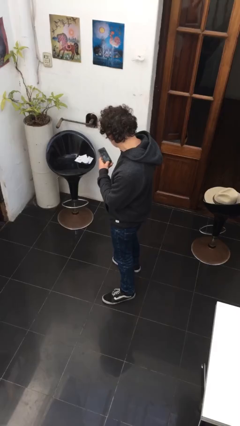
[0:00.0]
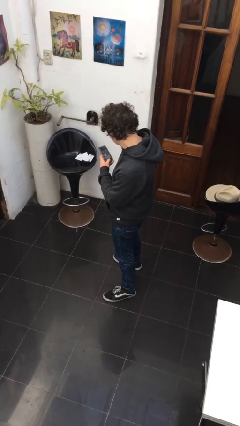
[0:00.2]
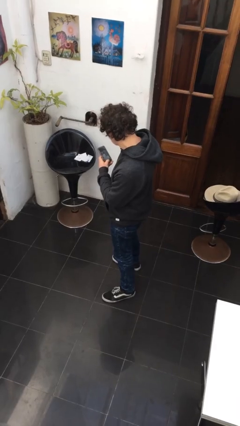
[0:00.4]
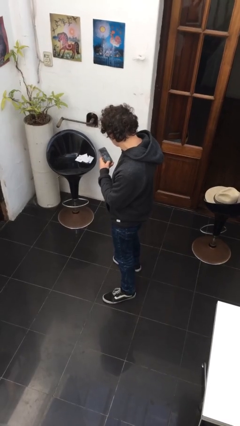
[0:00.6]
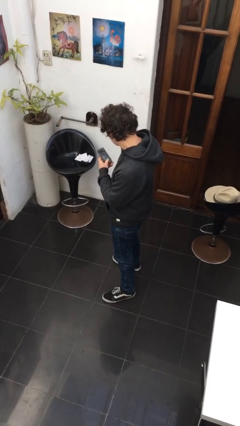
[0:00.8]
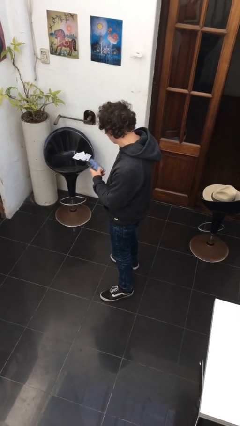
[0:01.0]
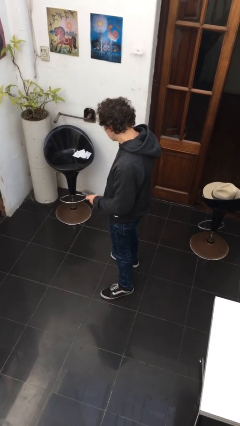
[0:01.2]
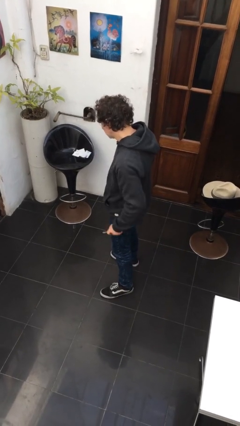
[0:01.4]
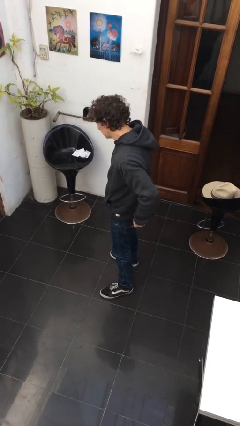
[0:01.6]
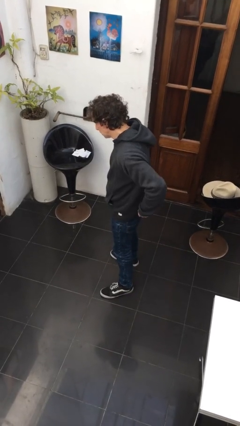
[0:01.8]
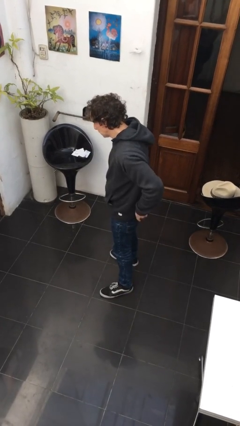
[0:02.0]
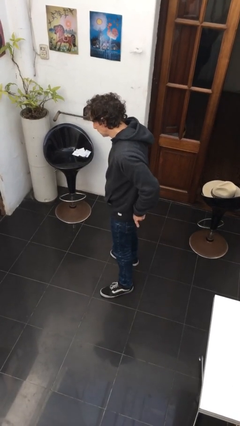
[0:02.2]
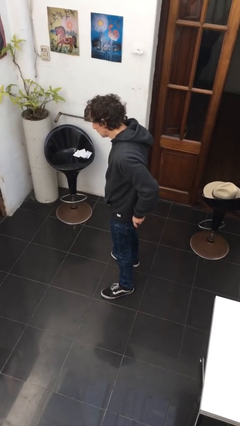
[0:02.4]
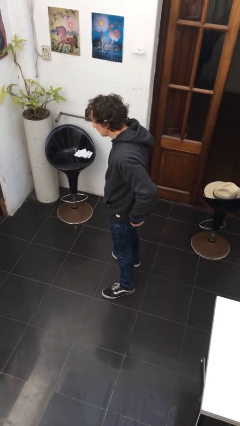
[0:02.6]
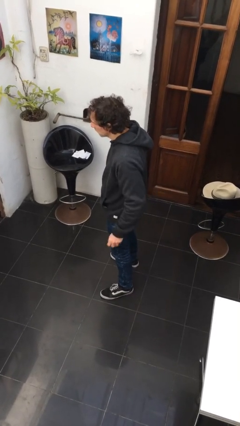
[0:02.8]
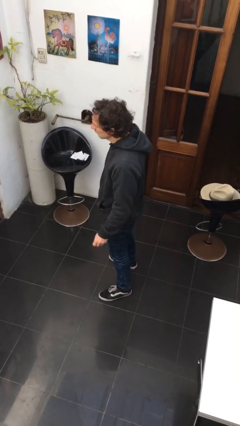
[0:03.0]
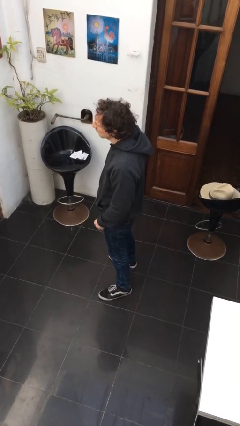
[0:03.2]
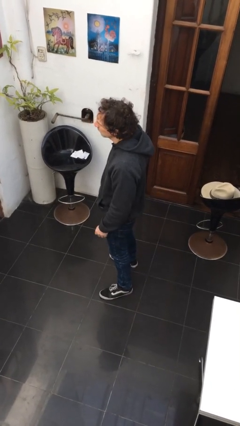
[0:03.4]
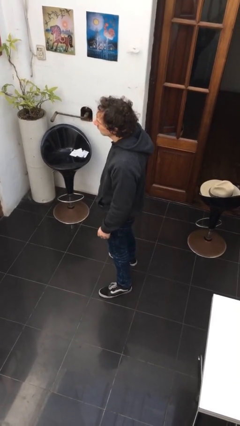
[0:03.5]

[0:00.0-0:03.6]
person puts phone into pocket

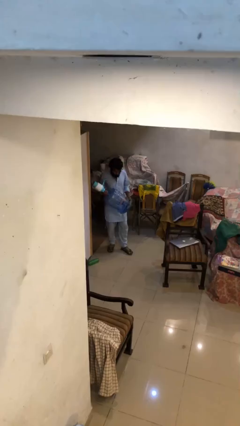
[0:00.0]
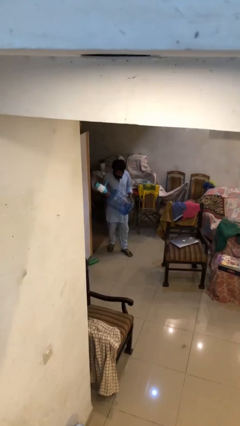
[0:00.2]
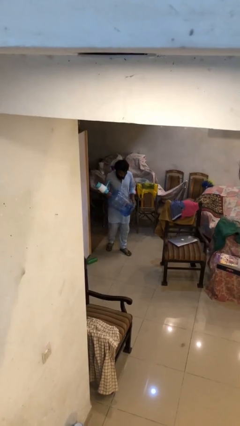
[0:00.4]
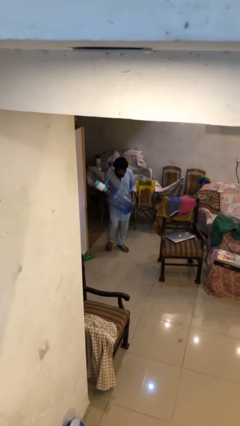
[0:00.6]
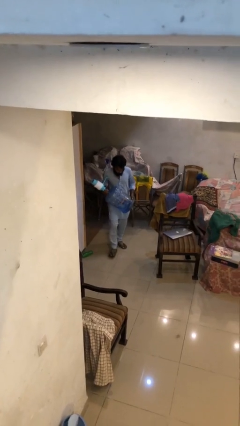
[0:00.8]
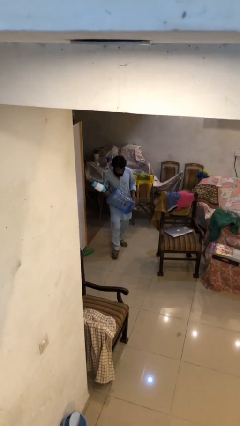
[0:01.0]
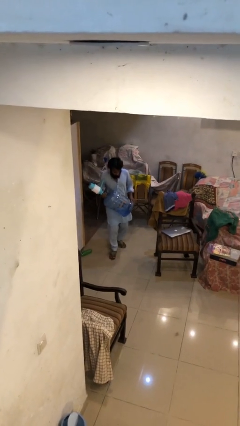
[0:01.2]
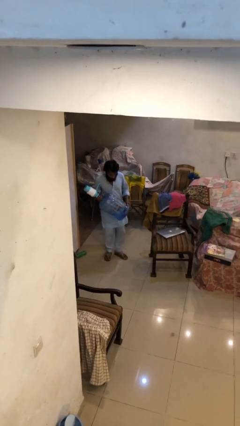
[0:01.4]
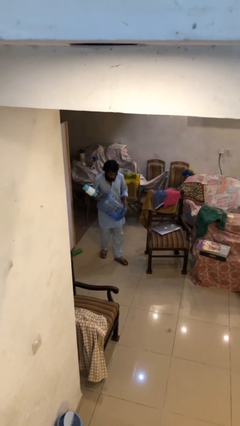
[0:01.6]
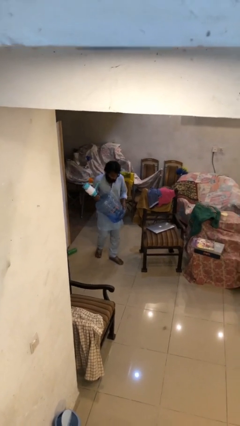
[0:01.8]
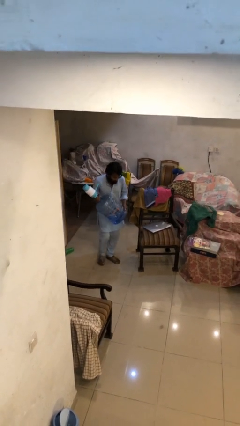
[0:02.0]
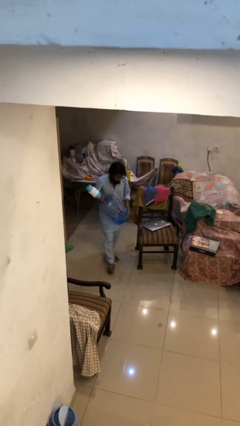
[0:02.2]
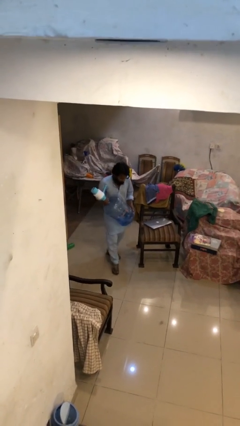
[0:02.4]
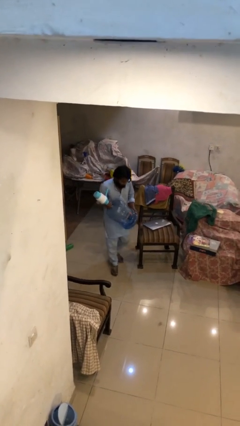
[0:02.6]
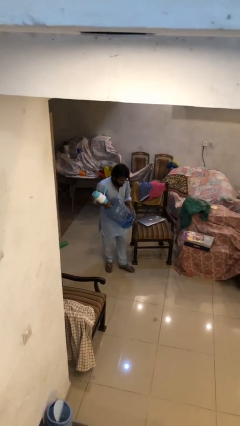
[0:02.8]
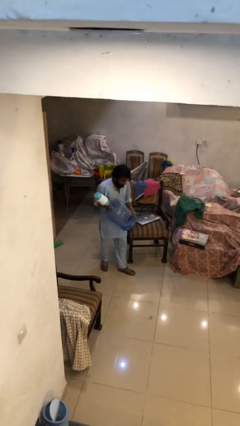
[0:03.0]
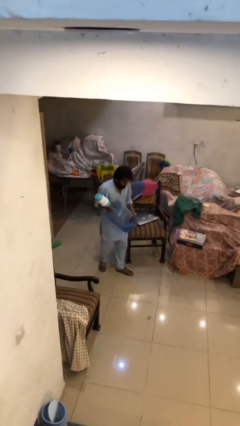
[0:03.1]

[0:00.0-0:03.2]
person carries heavy object

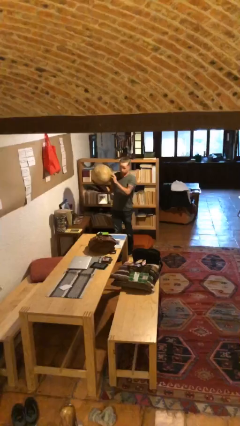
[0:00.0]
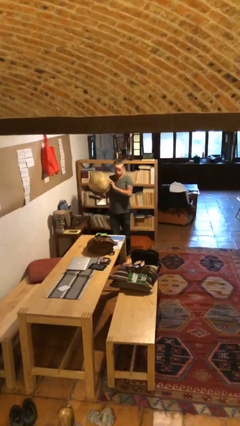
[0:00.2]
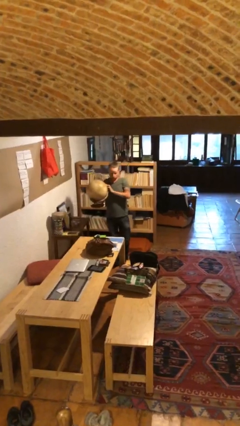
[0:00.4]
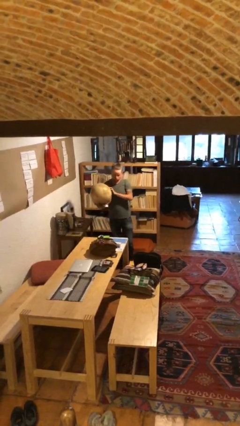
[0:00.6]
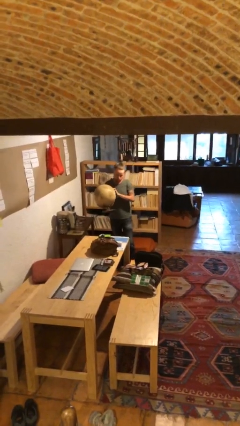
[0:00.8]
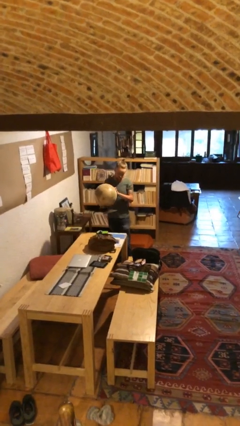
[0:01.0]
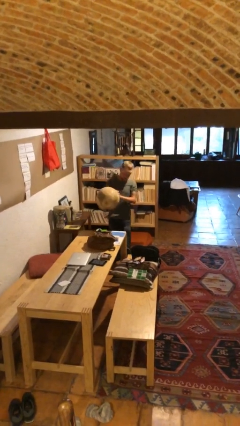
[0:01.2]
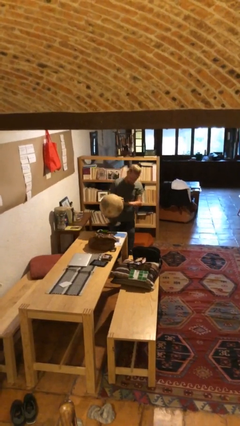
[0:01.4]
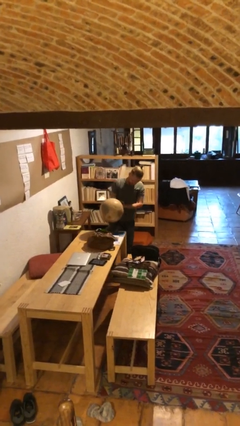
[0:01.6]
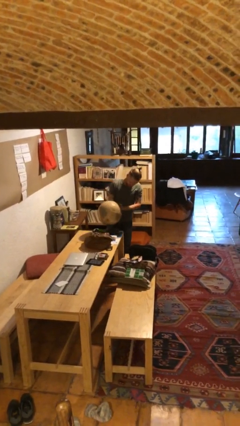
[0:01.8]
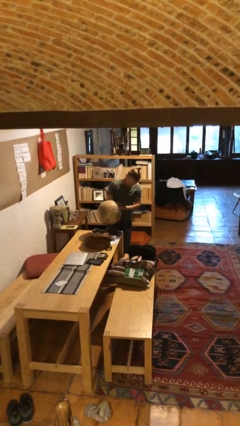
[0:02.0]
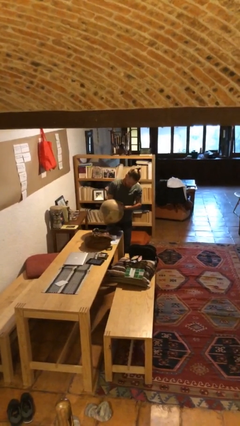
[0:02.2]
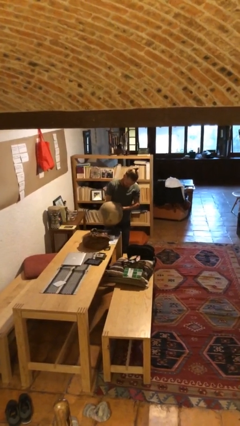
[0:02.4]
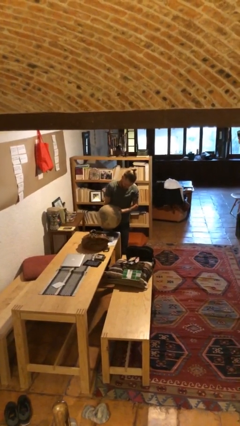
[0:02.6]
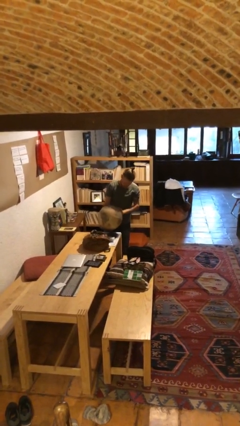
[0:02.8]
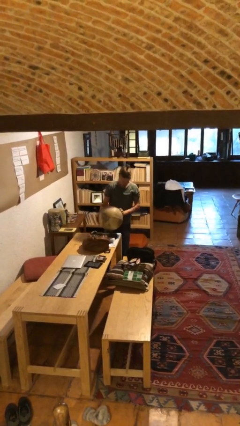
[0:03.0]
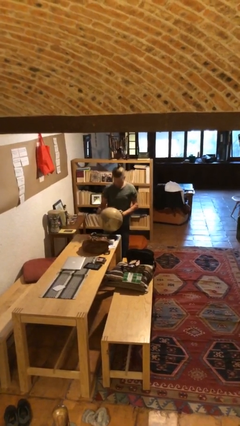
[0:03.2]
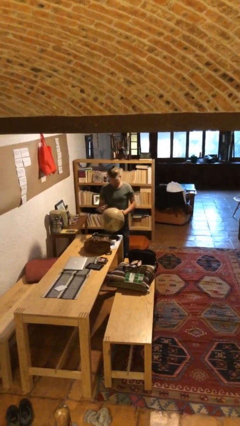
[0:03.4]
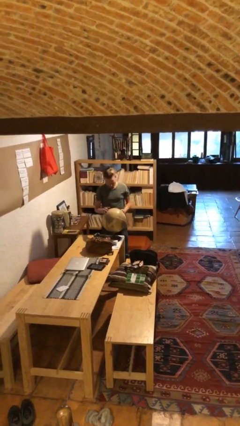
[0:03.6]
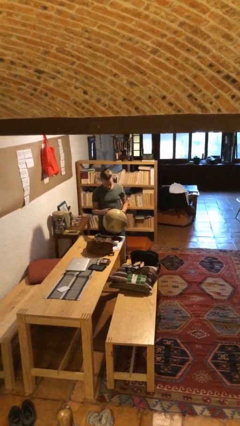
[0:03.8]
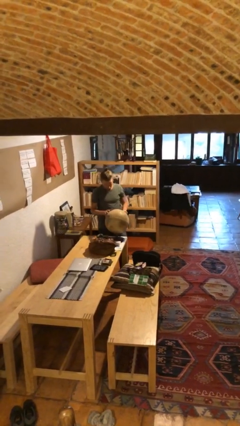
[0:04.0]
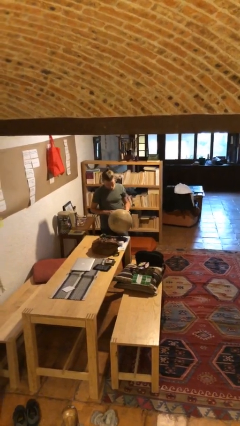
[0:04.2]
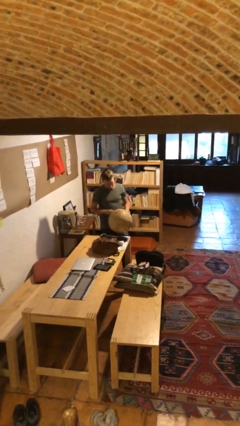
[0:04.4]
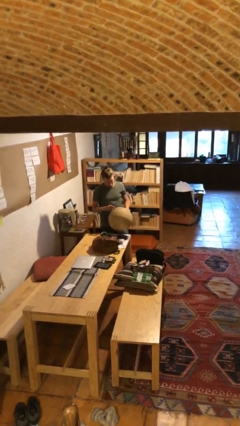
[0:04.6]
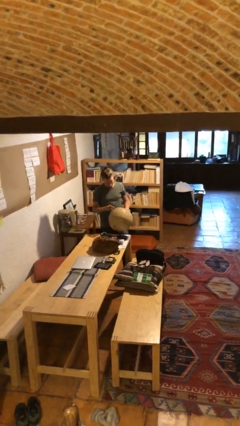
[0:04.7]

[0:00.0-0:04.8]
person puts down object on table

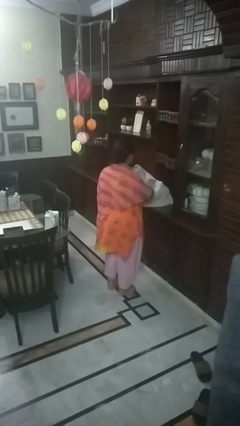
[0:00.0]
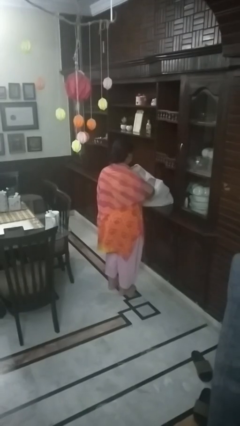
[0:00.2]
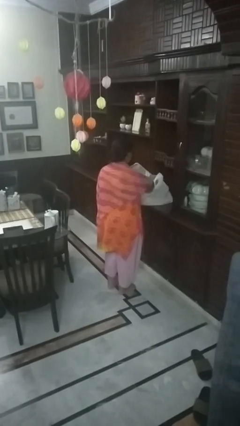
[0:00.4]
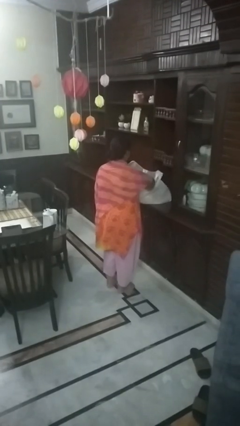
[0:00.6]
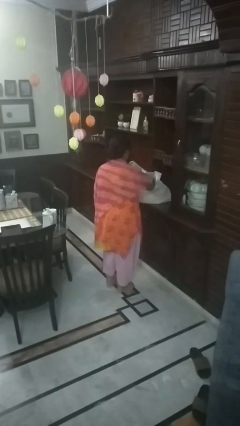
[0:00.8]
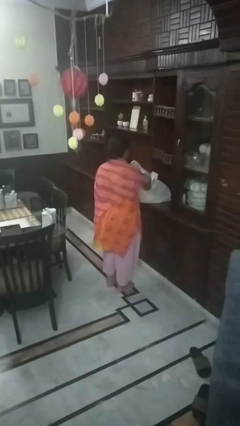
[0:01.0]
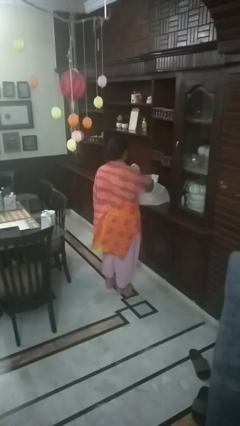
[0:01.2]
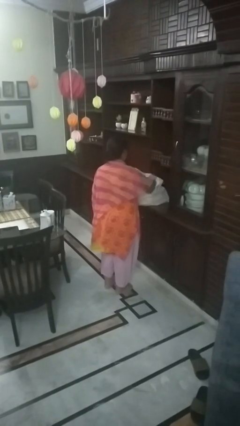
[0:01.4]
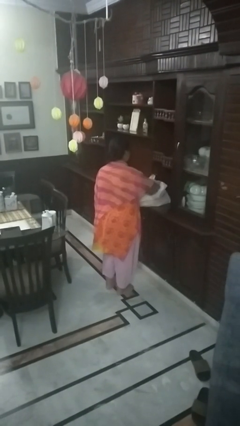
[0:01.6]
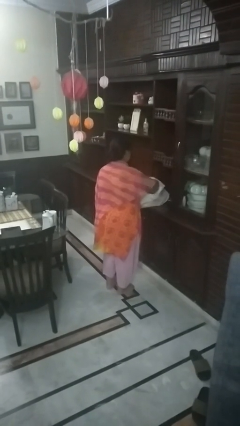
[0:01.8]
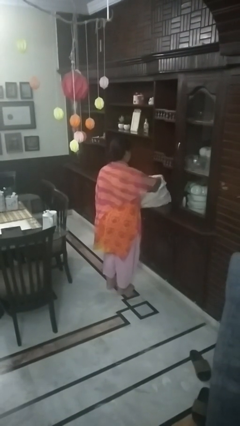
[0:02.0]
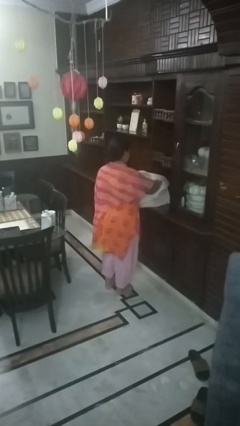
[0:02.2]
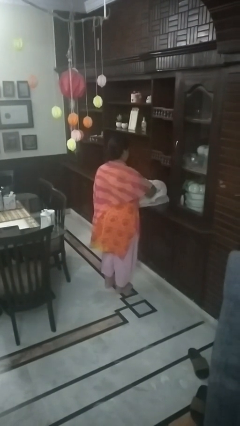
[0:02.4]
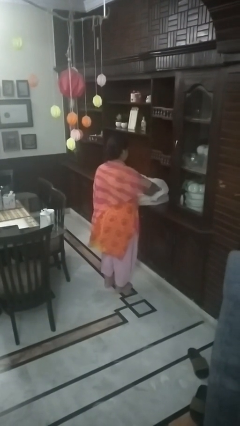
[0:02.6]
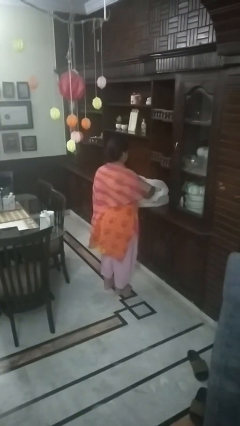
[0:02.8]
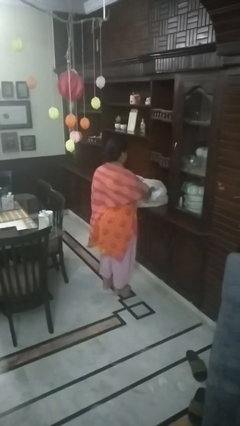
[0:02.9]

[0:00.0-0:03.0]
person searches in bag

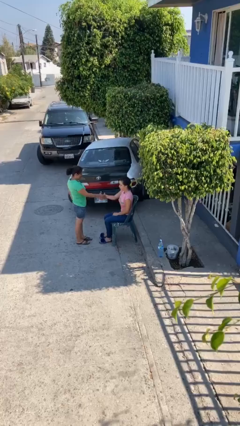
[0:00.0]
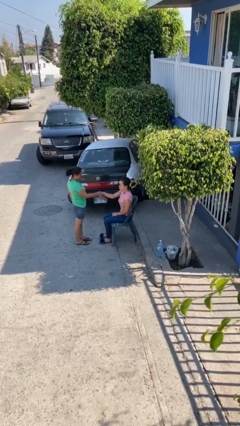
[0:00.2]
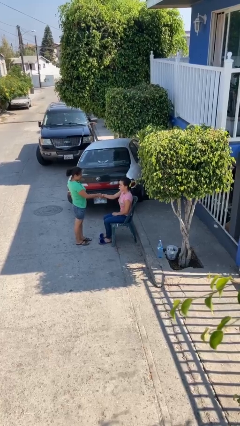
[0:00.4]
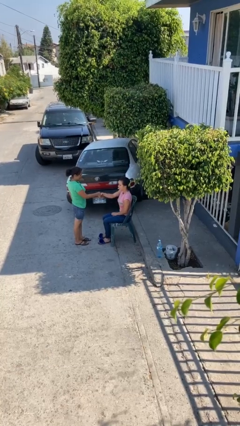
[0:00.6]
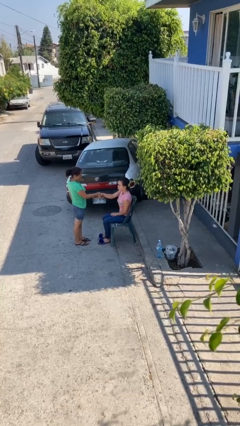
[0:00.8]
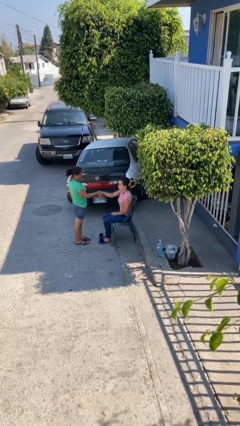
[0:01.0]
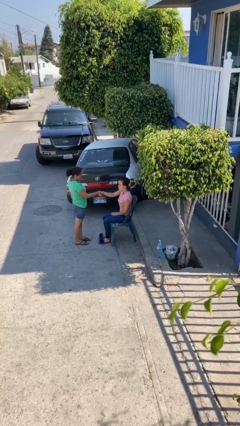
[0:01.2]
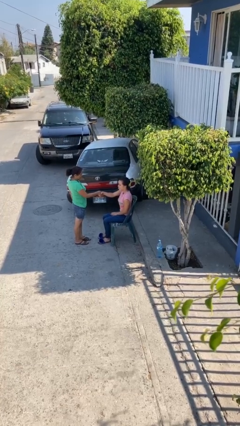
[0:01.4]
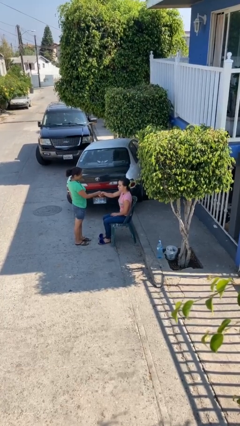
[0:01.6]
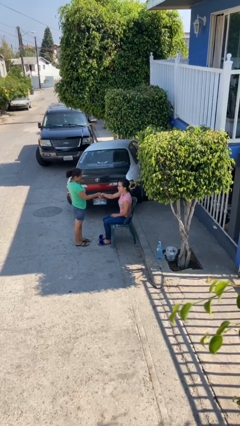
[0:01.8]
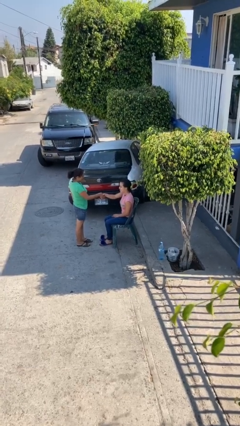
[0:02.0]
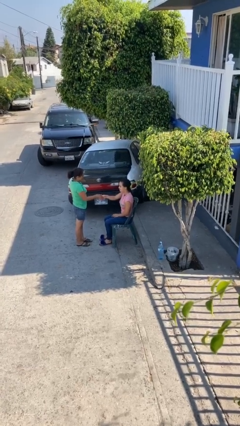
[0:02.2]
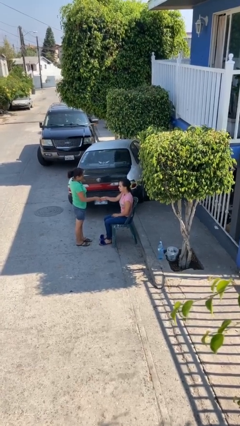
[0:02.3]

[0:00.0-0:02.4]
person shakes hand

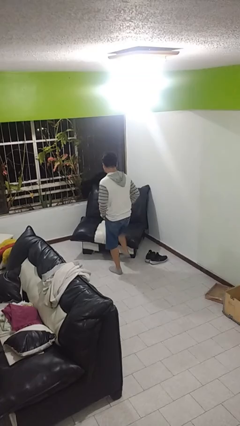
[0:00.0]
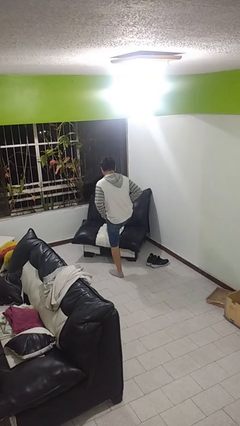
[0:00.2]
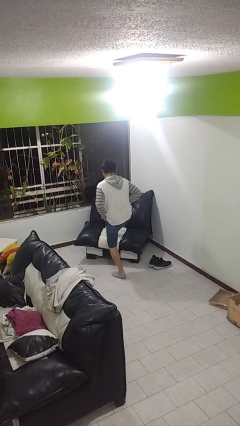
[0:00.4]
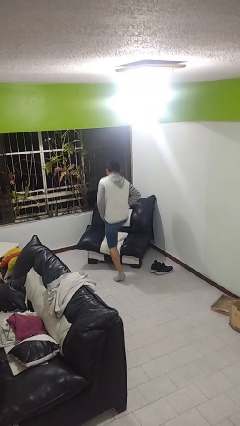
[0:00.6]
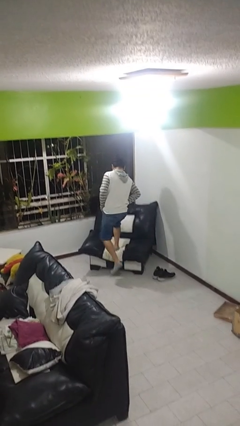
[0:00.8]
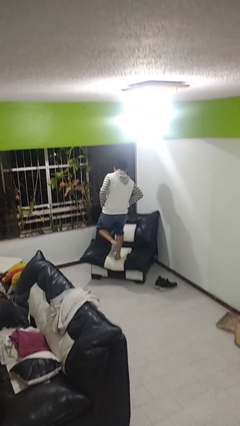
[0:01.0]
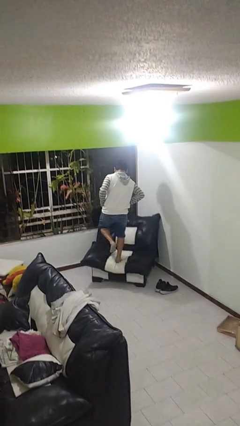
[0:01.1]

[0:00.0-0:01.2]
person climbs on couch
